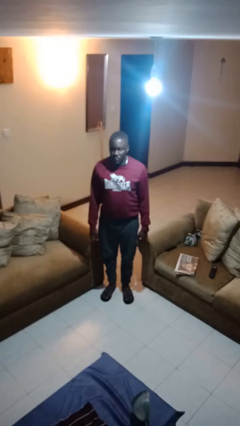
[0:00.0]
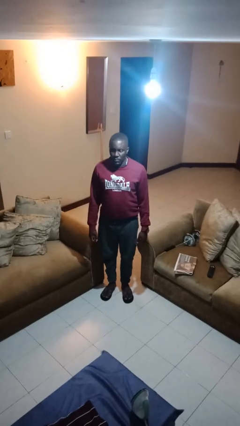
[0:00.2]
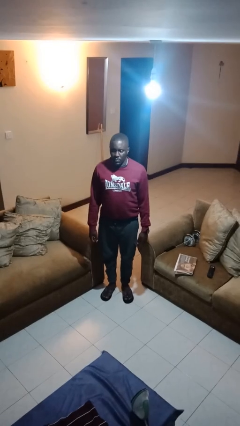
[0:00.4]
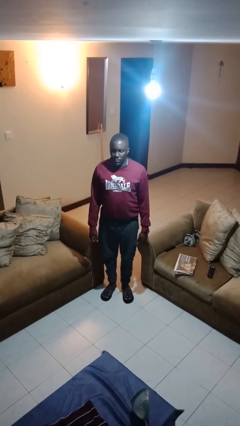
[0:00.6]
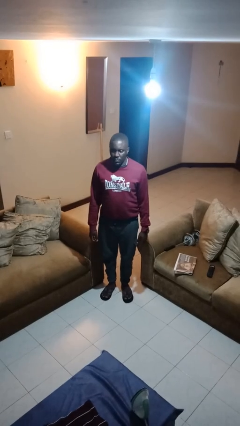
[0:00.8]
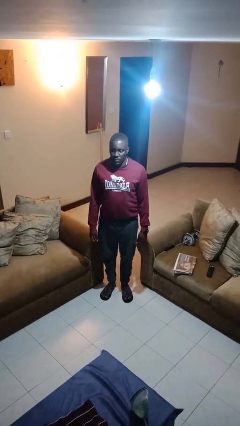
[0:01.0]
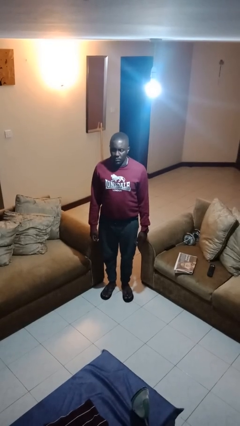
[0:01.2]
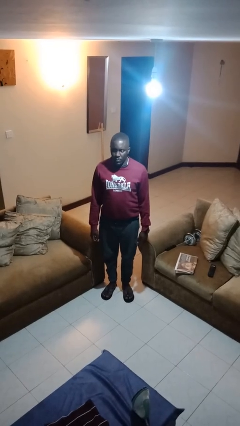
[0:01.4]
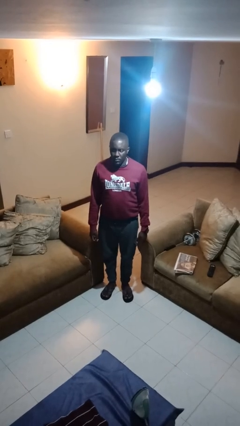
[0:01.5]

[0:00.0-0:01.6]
person stands up

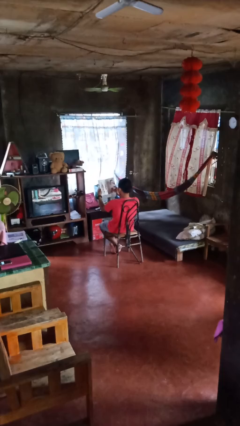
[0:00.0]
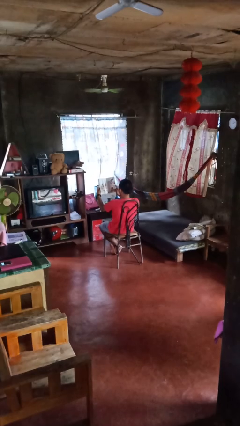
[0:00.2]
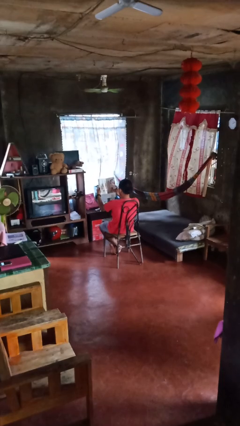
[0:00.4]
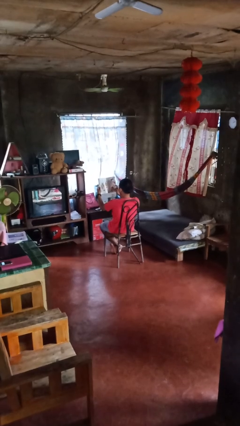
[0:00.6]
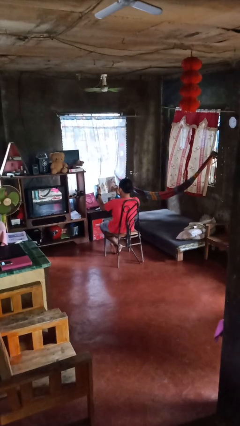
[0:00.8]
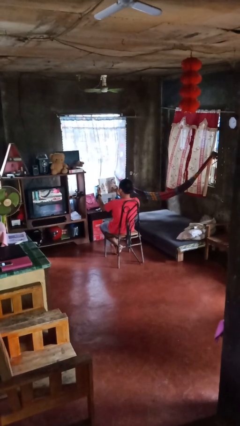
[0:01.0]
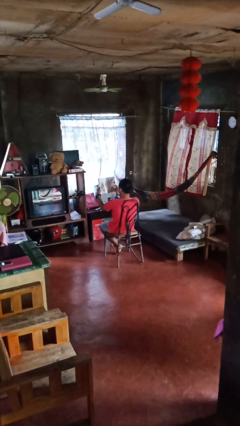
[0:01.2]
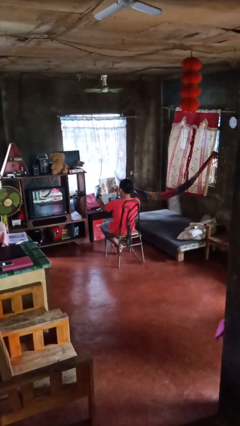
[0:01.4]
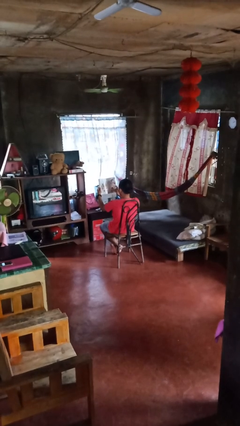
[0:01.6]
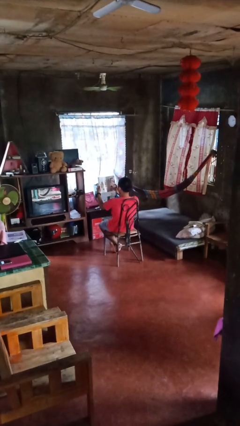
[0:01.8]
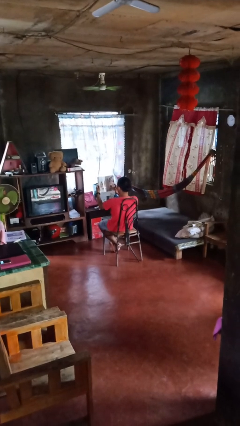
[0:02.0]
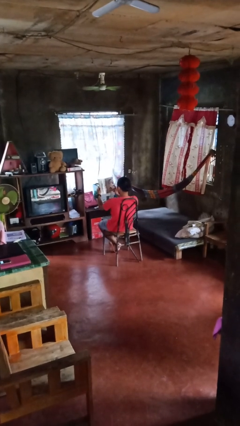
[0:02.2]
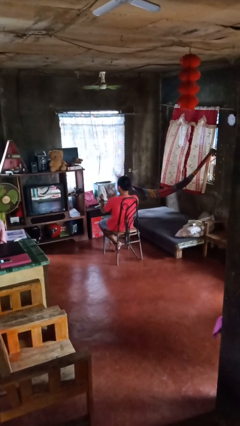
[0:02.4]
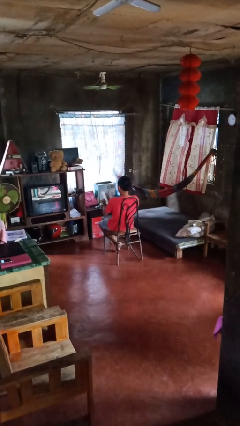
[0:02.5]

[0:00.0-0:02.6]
person reads magazine

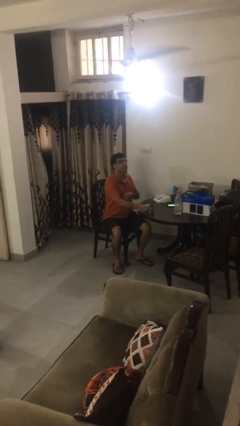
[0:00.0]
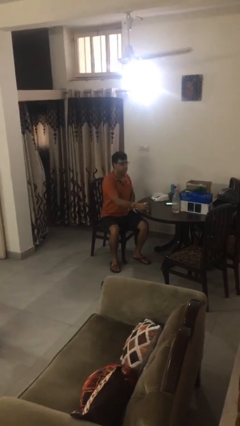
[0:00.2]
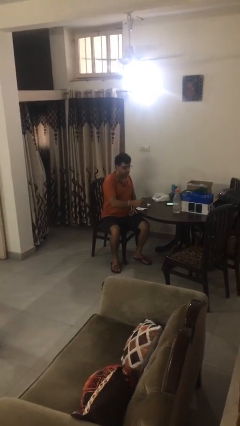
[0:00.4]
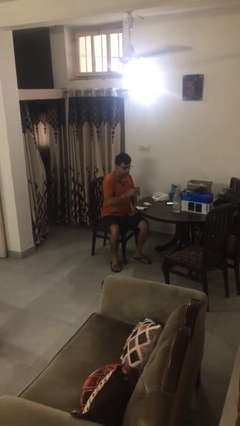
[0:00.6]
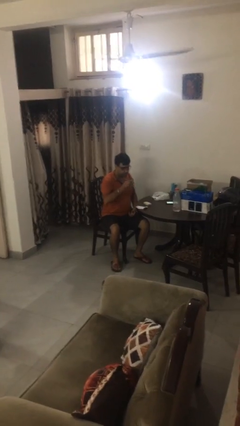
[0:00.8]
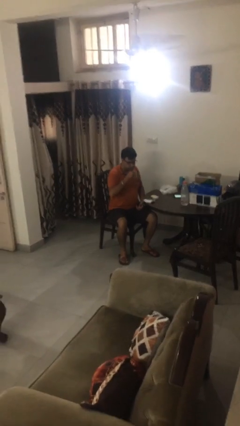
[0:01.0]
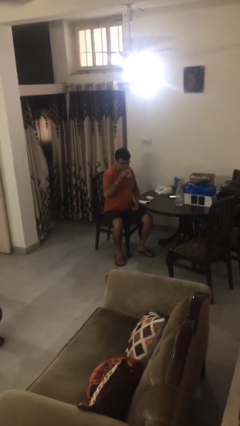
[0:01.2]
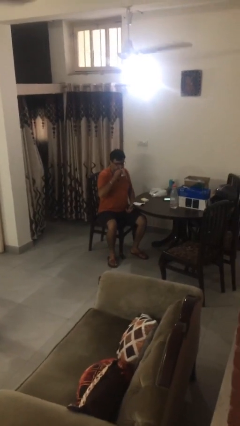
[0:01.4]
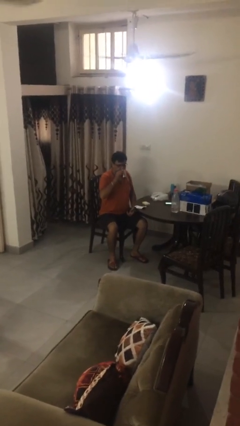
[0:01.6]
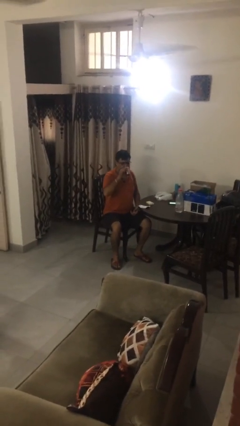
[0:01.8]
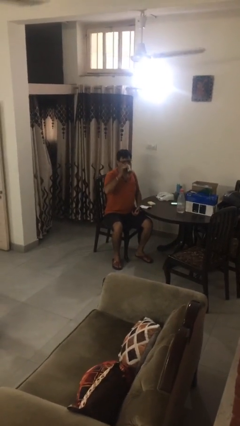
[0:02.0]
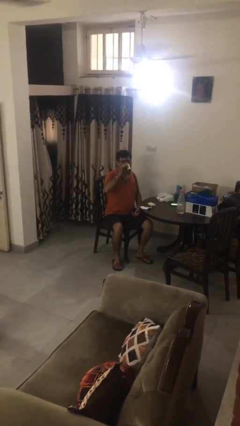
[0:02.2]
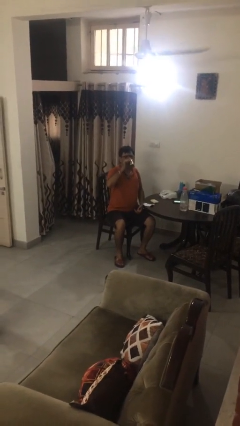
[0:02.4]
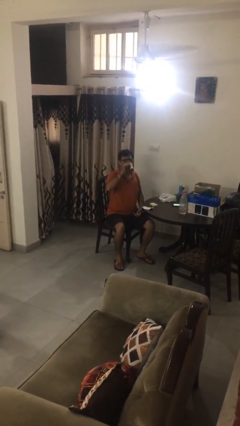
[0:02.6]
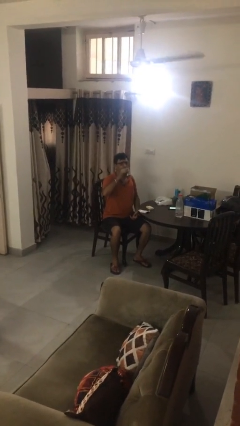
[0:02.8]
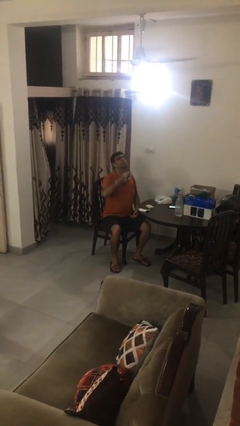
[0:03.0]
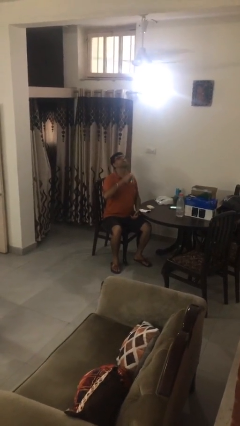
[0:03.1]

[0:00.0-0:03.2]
person drinks from cup

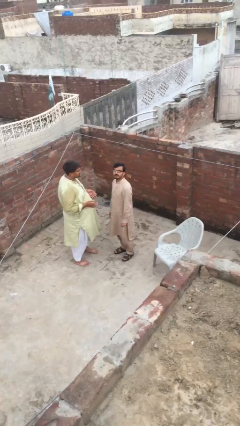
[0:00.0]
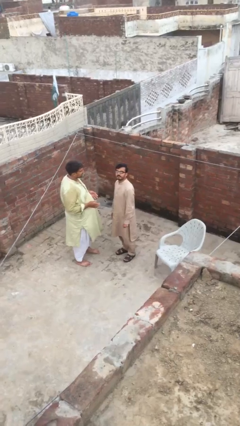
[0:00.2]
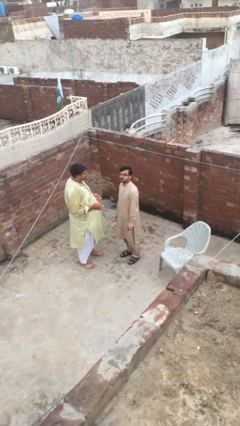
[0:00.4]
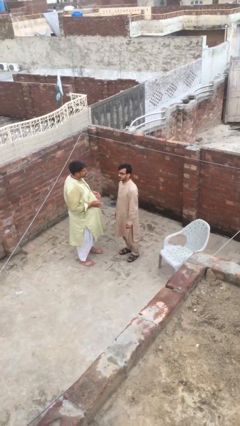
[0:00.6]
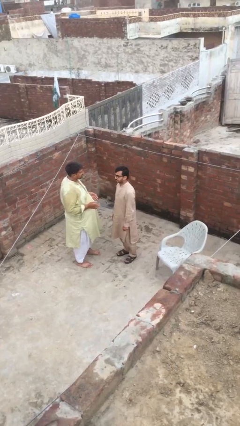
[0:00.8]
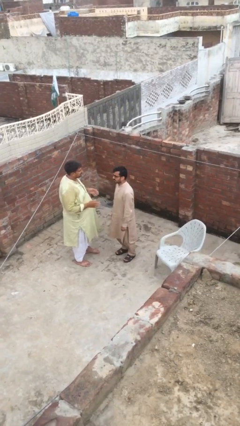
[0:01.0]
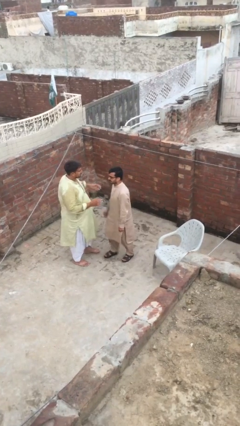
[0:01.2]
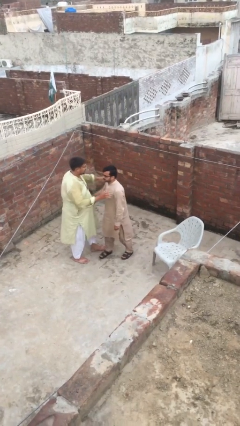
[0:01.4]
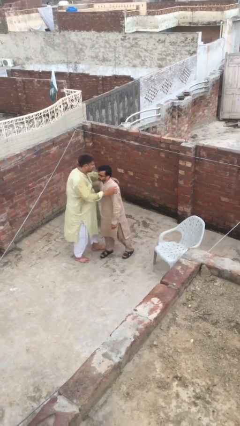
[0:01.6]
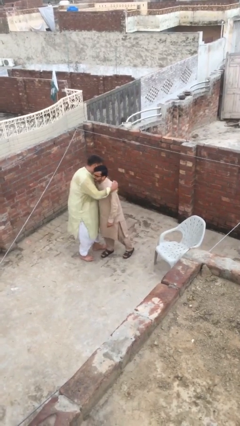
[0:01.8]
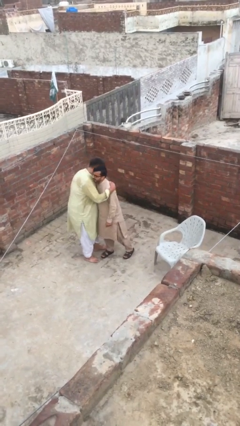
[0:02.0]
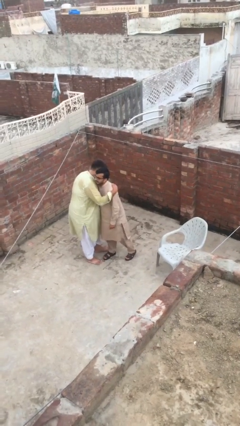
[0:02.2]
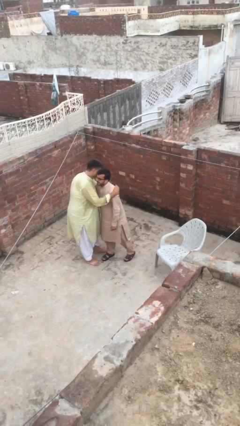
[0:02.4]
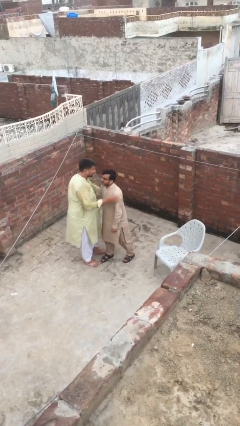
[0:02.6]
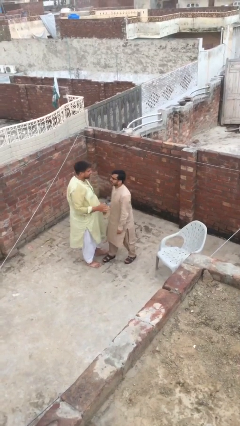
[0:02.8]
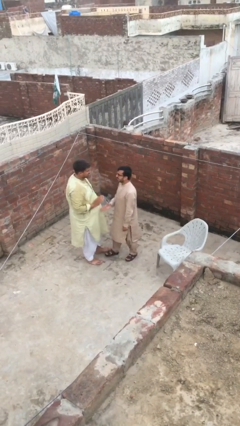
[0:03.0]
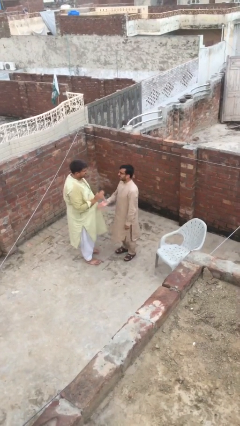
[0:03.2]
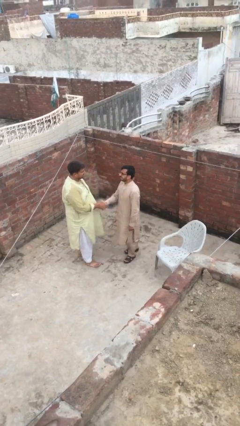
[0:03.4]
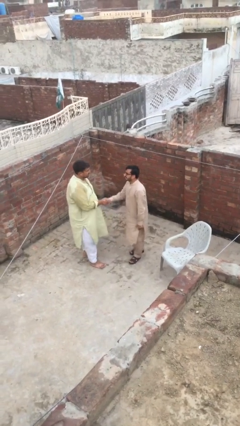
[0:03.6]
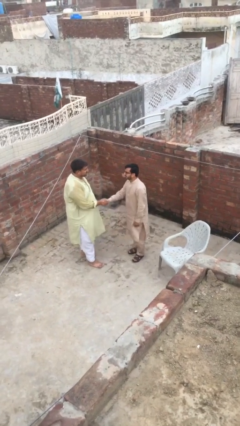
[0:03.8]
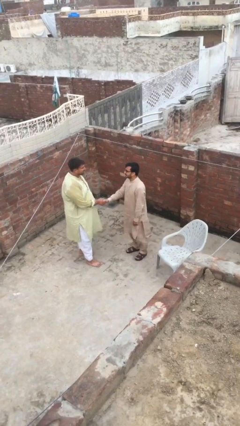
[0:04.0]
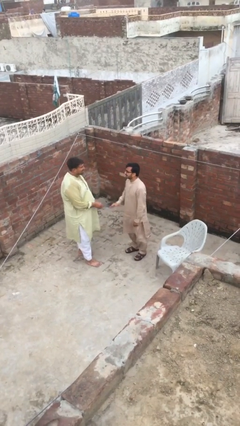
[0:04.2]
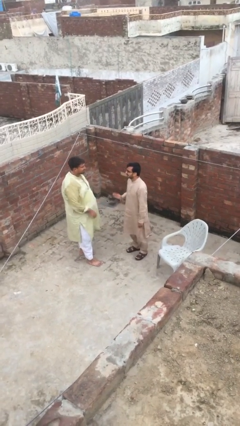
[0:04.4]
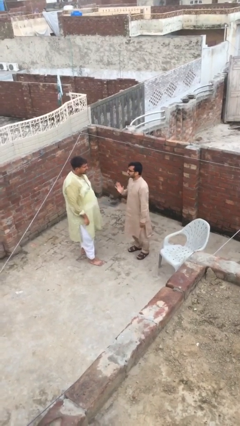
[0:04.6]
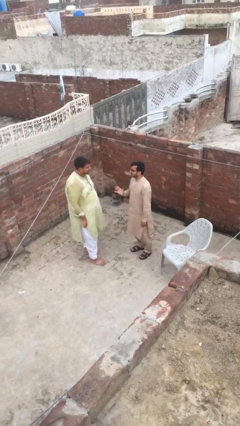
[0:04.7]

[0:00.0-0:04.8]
person embraces person

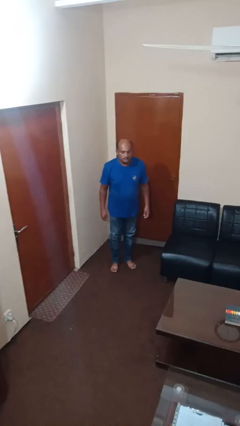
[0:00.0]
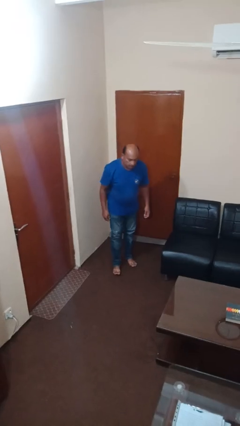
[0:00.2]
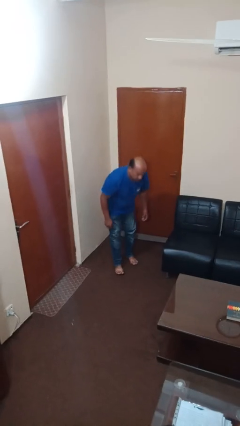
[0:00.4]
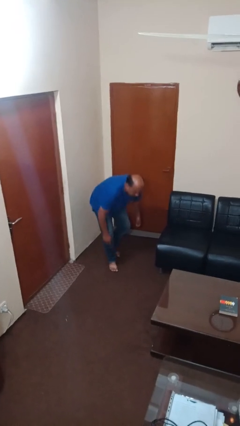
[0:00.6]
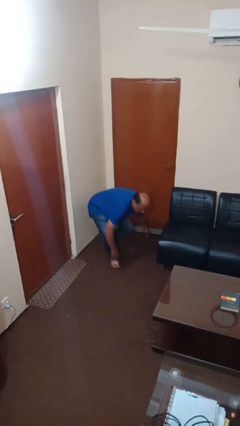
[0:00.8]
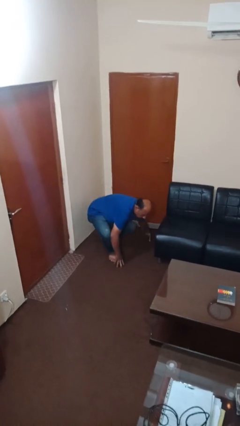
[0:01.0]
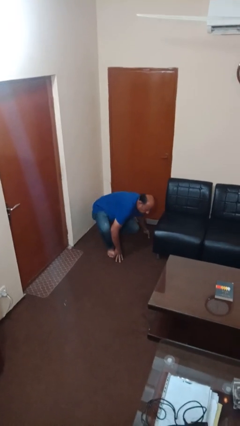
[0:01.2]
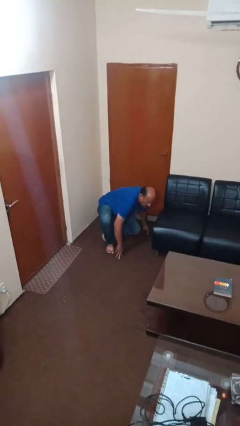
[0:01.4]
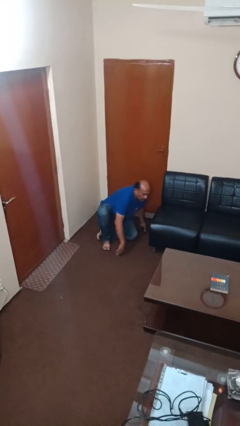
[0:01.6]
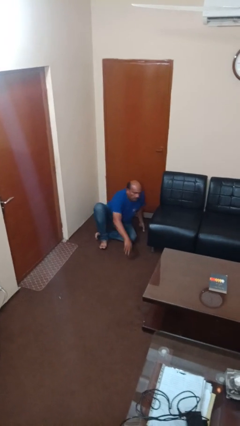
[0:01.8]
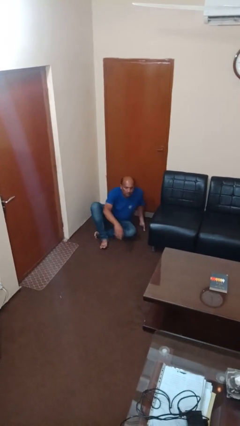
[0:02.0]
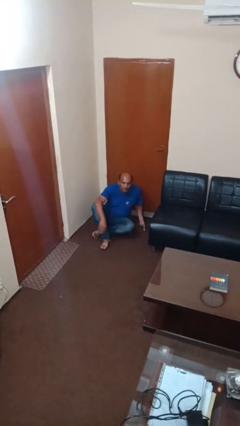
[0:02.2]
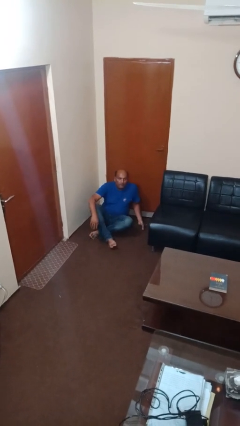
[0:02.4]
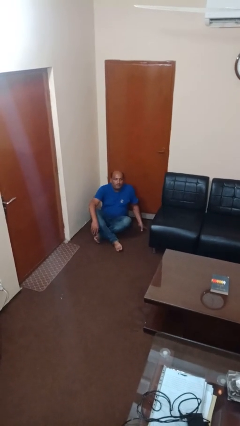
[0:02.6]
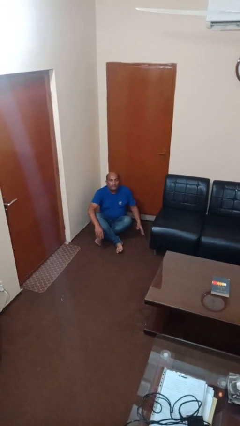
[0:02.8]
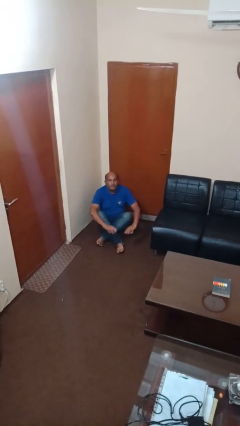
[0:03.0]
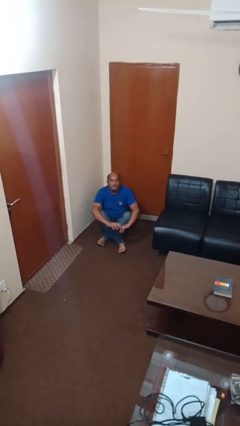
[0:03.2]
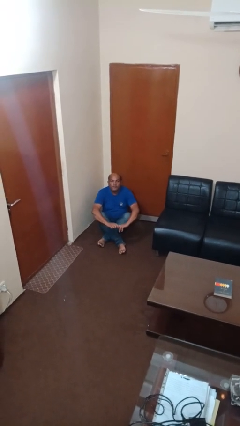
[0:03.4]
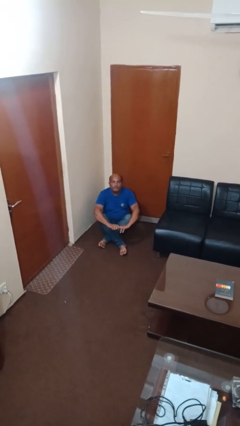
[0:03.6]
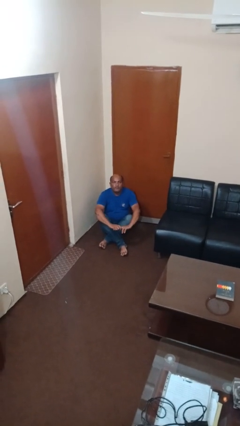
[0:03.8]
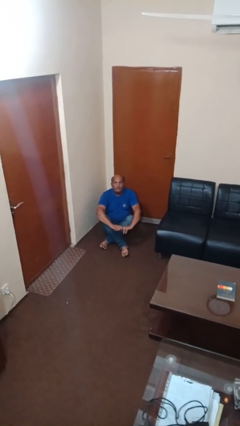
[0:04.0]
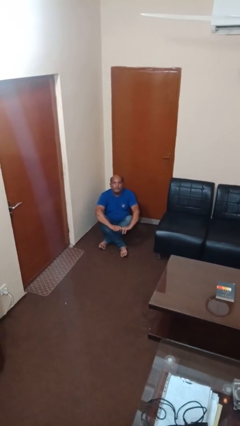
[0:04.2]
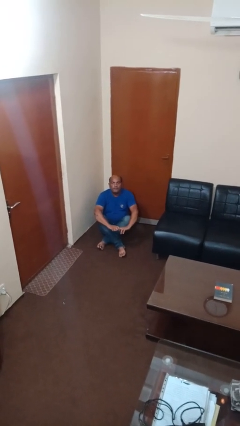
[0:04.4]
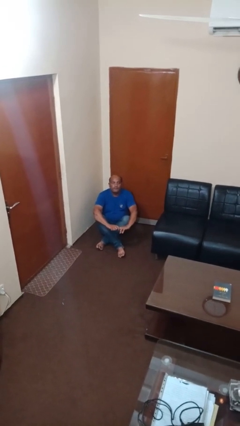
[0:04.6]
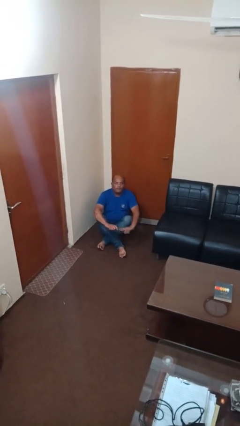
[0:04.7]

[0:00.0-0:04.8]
person sits crisscross

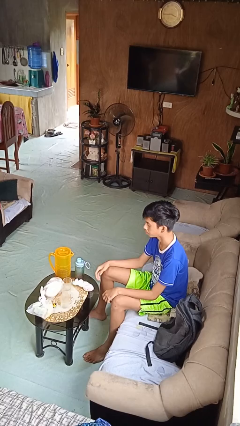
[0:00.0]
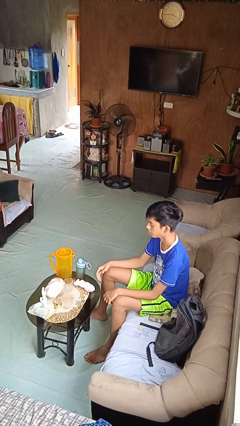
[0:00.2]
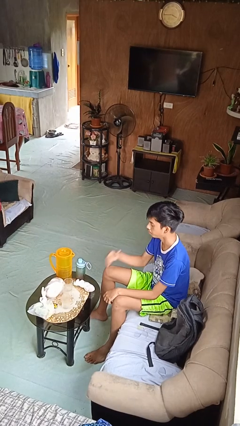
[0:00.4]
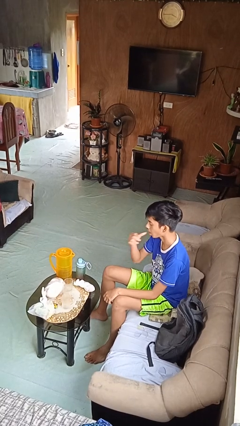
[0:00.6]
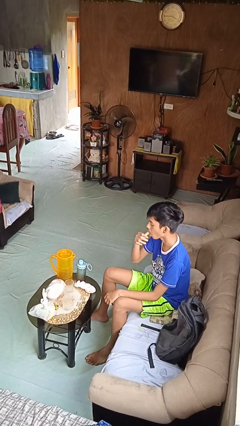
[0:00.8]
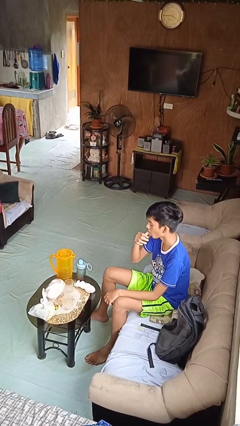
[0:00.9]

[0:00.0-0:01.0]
person licks fingers
